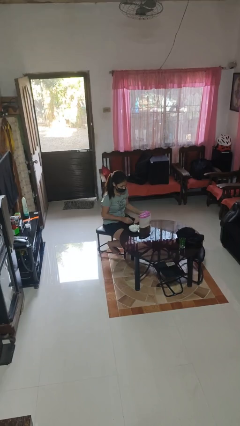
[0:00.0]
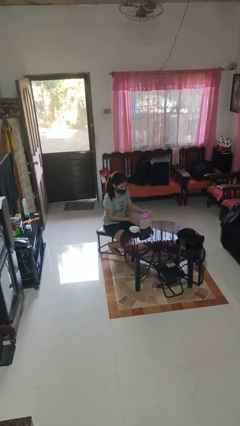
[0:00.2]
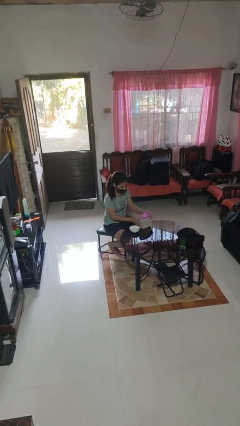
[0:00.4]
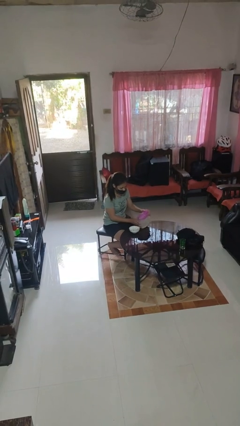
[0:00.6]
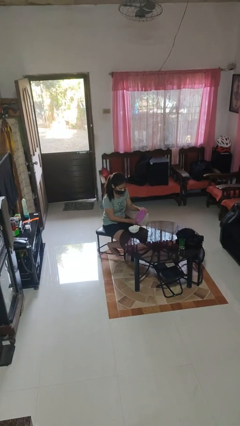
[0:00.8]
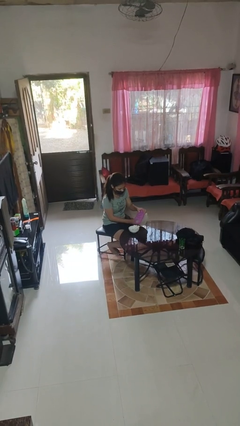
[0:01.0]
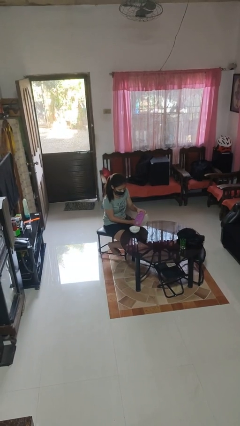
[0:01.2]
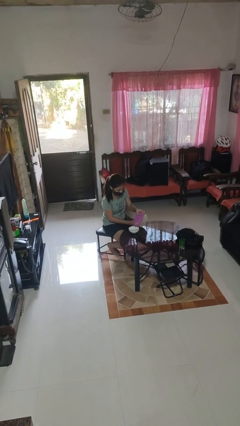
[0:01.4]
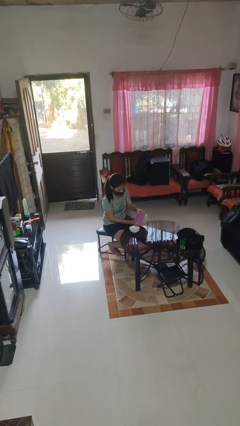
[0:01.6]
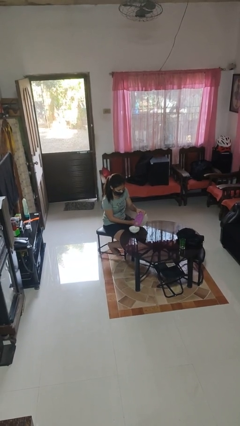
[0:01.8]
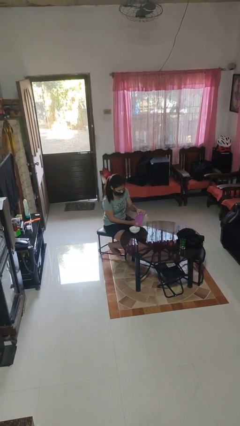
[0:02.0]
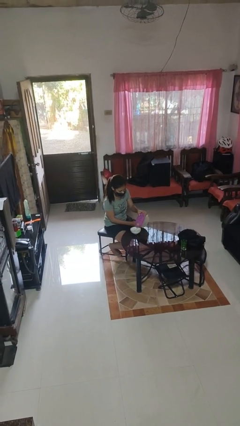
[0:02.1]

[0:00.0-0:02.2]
person pours into bowl

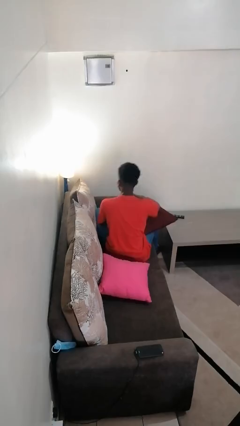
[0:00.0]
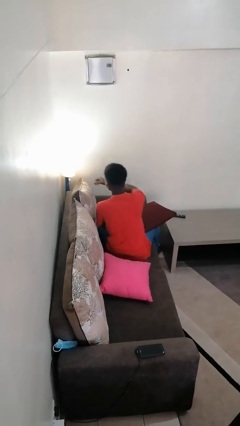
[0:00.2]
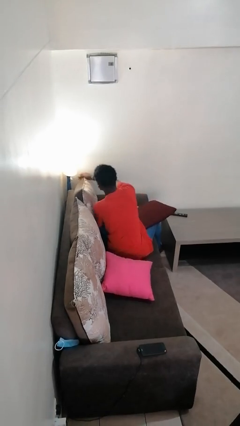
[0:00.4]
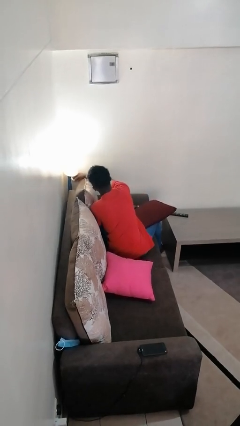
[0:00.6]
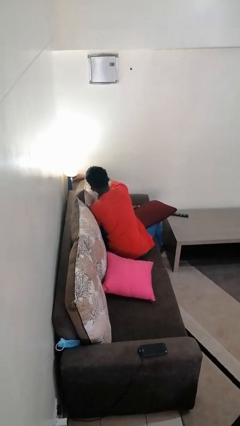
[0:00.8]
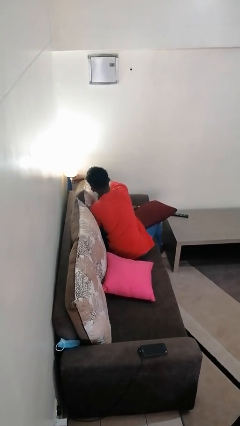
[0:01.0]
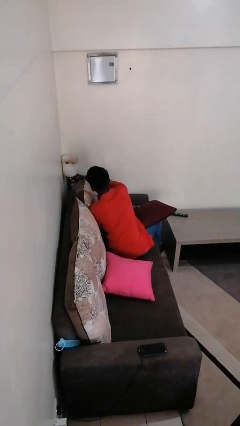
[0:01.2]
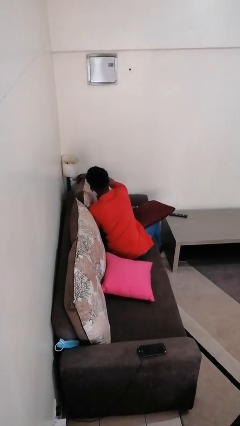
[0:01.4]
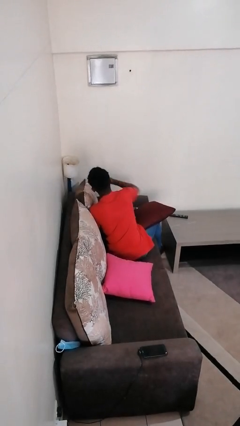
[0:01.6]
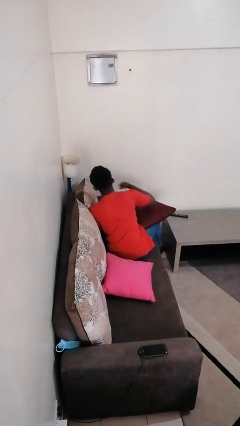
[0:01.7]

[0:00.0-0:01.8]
person turns off lamp

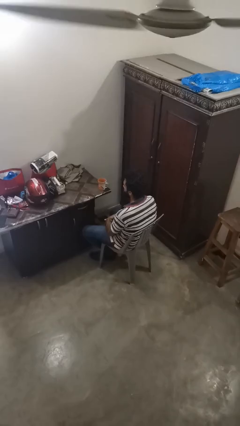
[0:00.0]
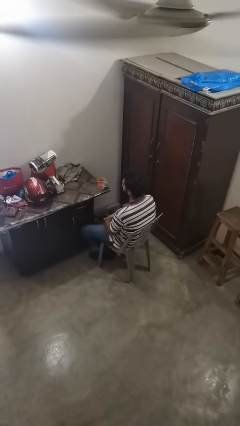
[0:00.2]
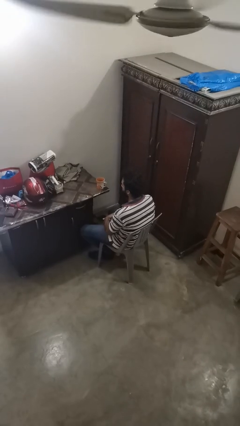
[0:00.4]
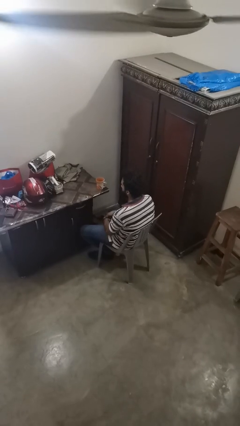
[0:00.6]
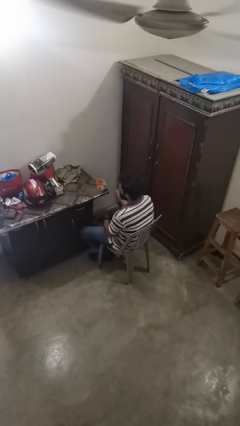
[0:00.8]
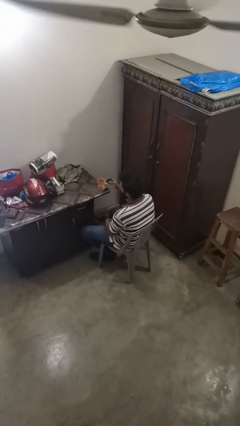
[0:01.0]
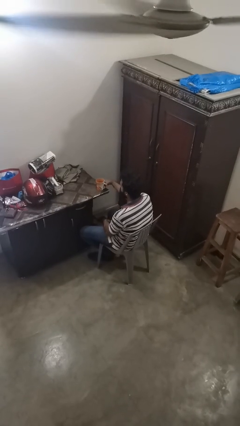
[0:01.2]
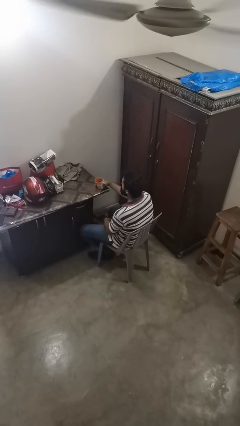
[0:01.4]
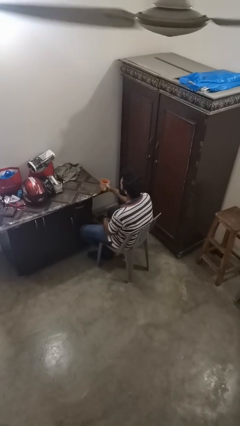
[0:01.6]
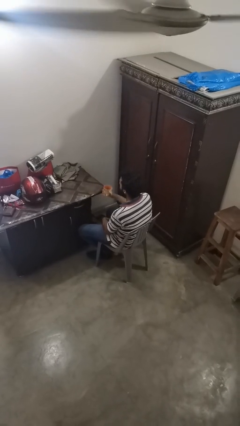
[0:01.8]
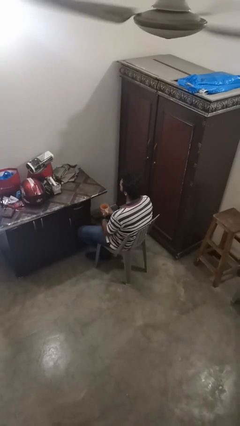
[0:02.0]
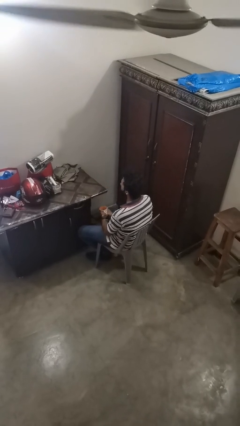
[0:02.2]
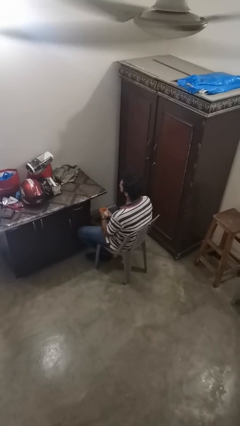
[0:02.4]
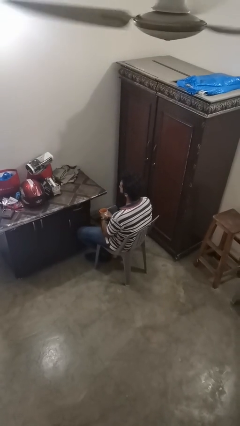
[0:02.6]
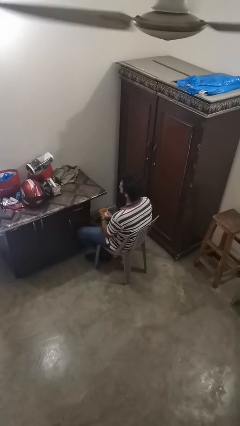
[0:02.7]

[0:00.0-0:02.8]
person picks up object from table

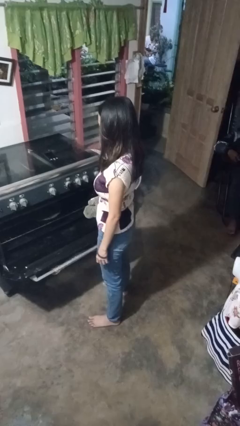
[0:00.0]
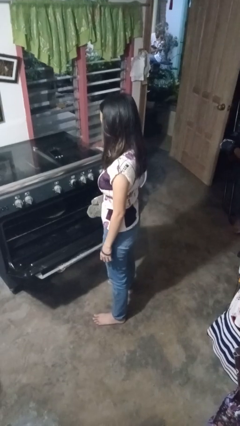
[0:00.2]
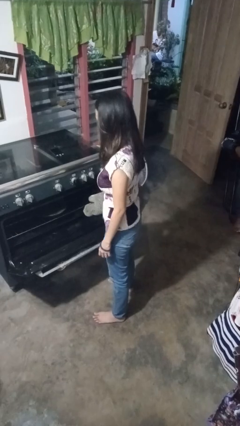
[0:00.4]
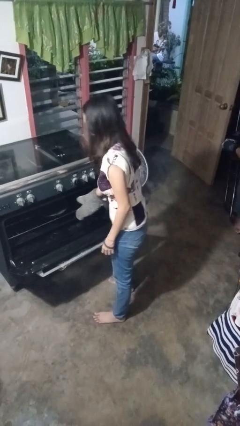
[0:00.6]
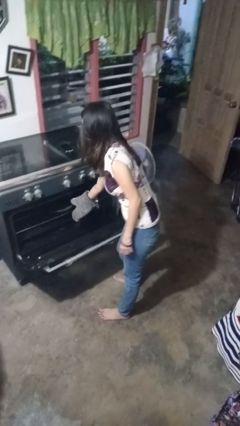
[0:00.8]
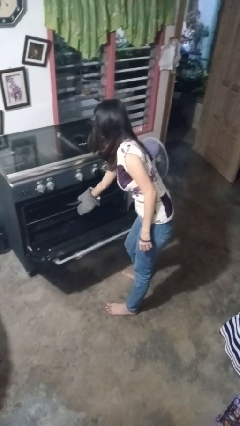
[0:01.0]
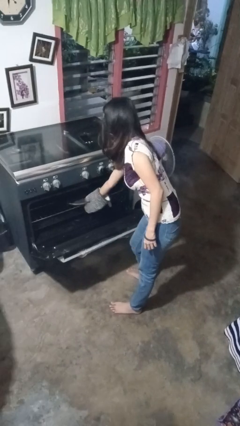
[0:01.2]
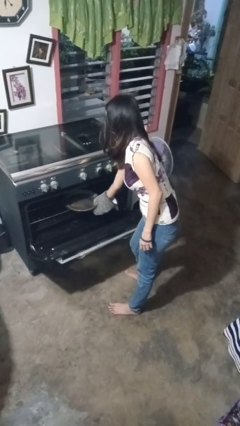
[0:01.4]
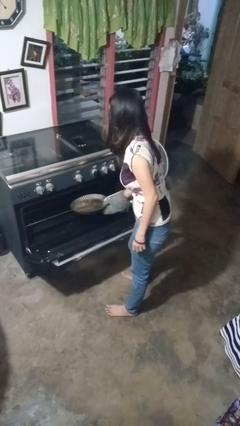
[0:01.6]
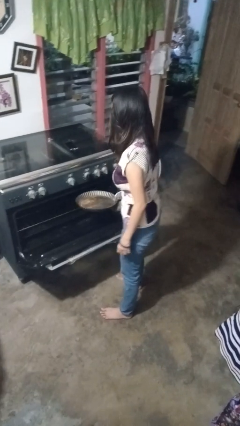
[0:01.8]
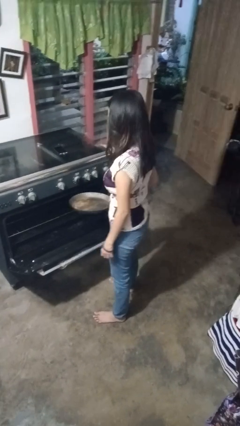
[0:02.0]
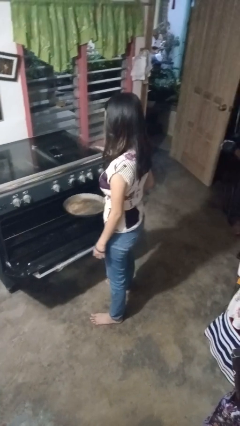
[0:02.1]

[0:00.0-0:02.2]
person takes object from oven

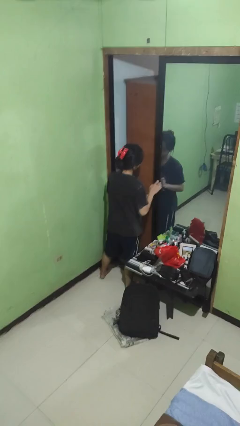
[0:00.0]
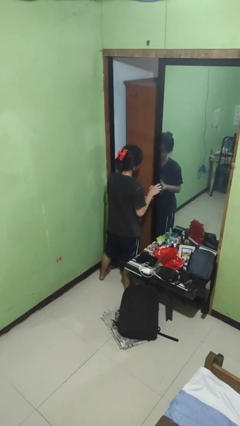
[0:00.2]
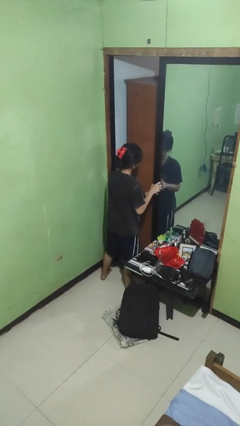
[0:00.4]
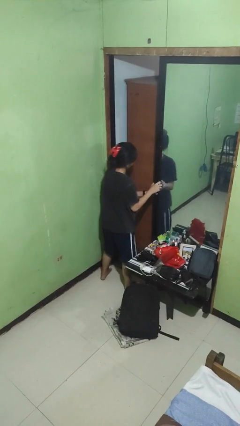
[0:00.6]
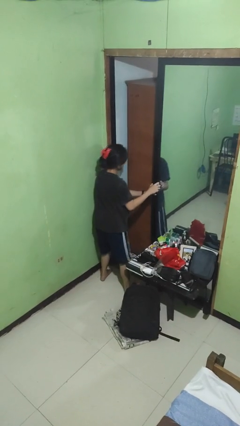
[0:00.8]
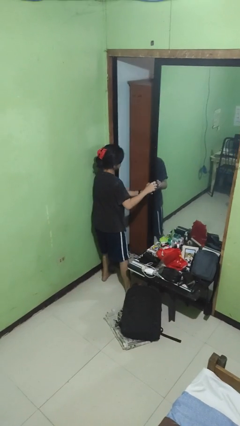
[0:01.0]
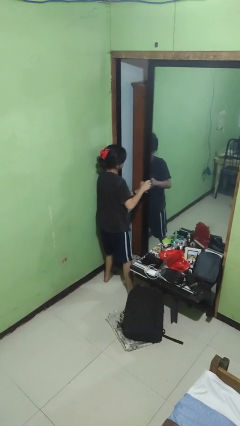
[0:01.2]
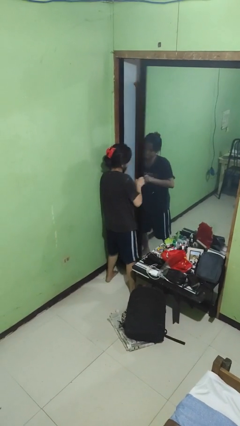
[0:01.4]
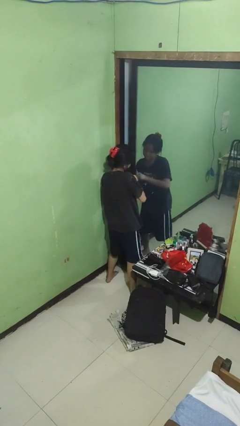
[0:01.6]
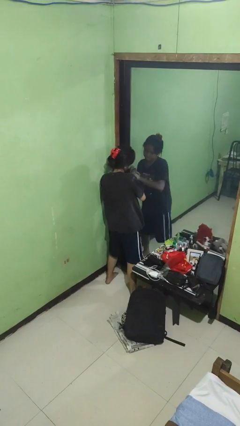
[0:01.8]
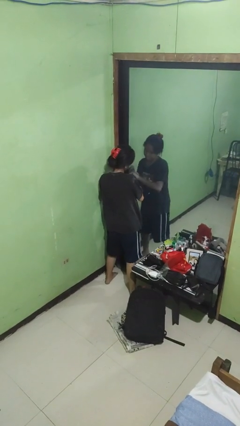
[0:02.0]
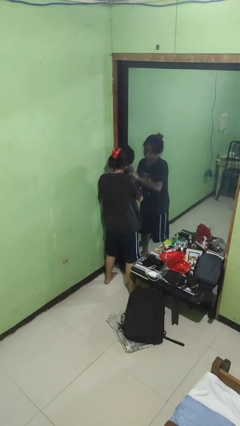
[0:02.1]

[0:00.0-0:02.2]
person closes sliding door

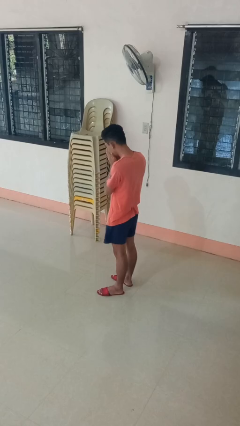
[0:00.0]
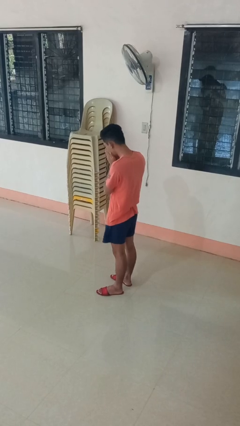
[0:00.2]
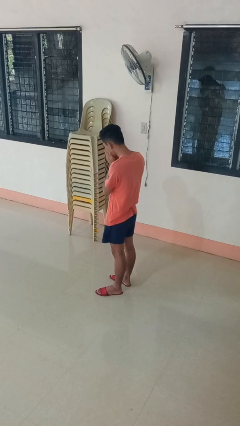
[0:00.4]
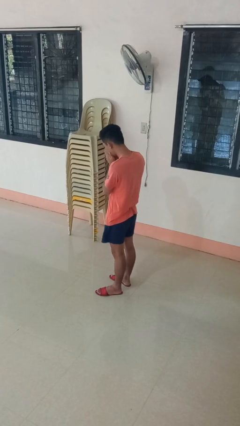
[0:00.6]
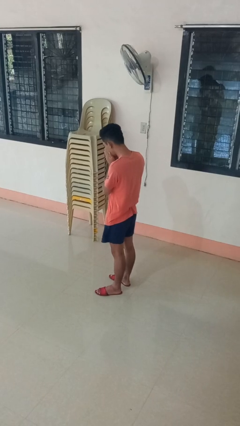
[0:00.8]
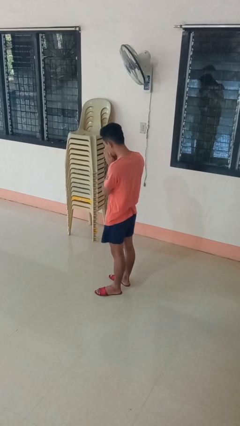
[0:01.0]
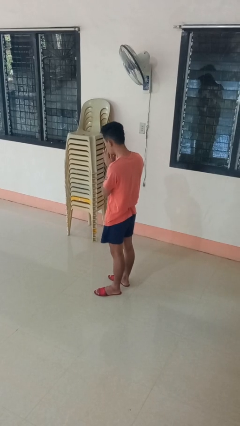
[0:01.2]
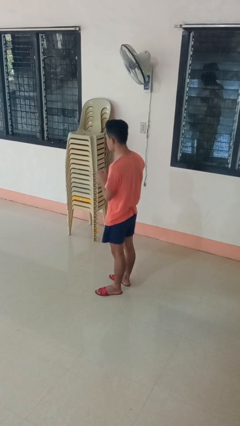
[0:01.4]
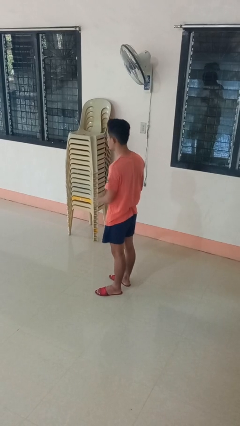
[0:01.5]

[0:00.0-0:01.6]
person sneezes into hand

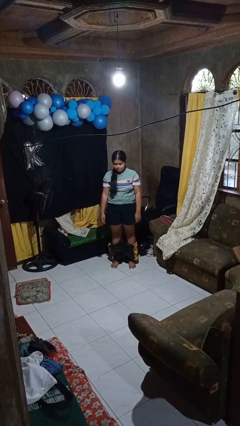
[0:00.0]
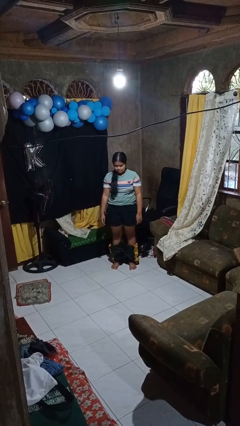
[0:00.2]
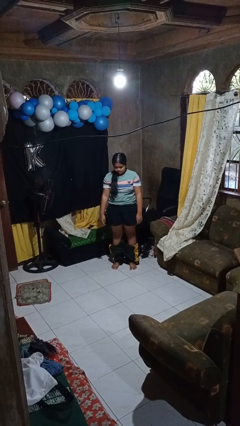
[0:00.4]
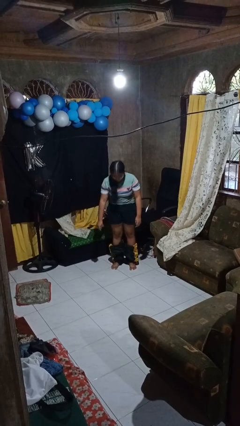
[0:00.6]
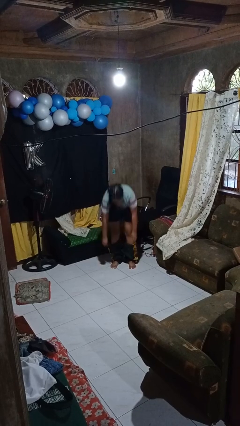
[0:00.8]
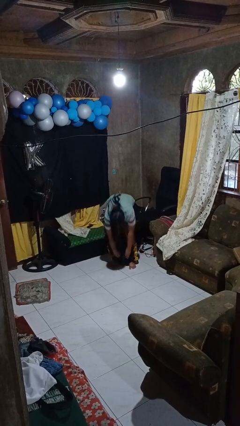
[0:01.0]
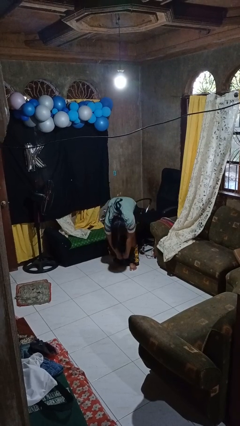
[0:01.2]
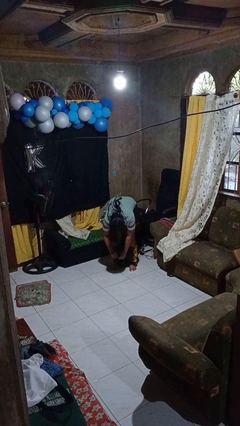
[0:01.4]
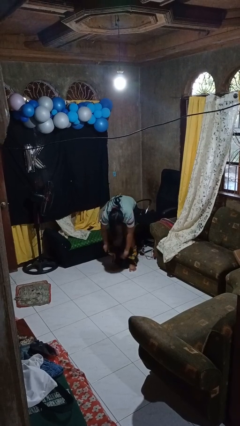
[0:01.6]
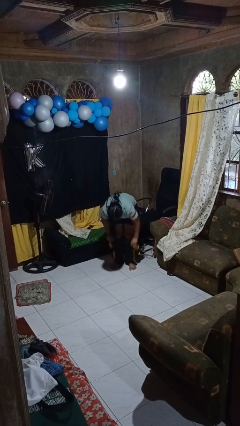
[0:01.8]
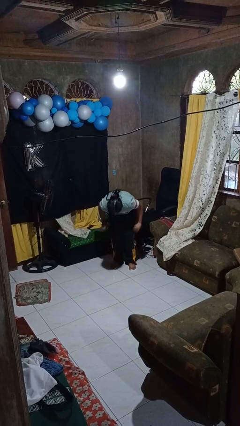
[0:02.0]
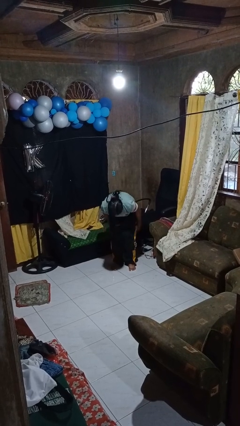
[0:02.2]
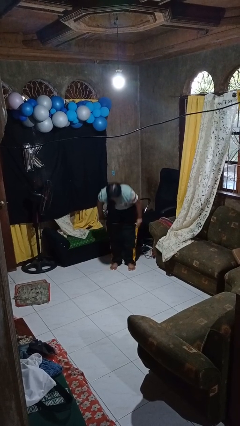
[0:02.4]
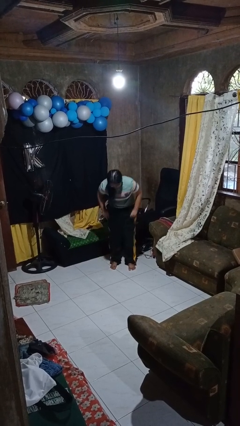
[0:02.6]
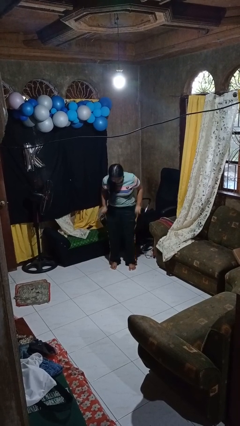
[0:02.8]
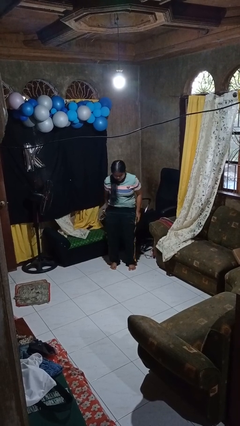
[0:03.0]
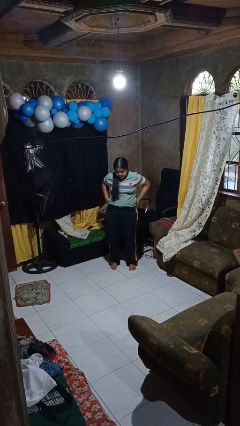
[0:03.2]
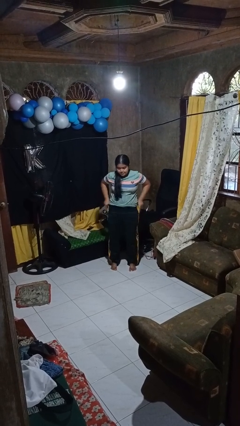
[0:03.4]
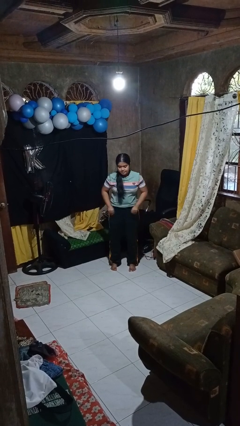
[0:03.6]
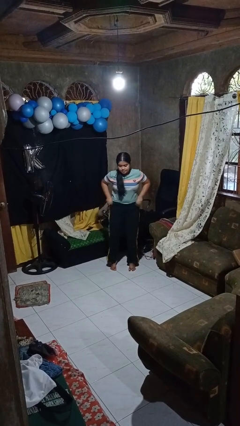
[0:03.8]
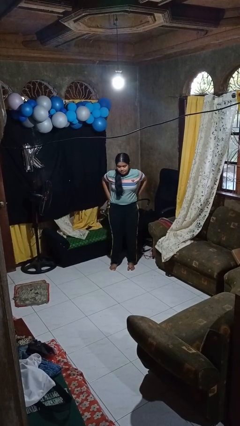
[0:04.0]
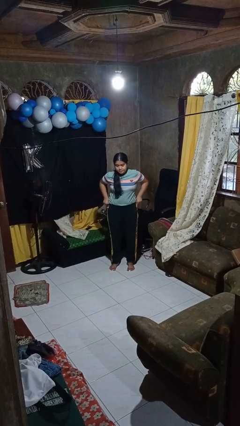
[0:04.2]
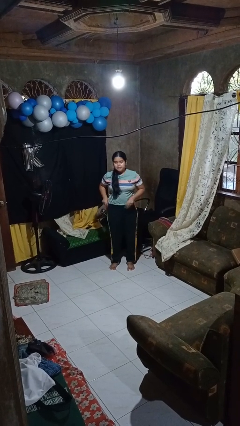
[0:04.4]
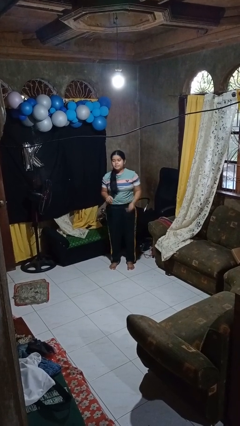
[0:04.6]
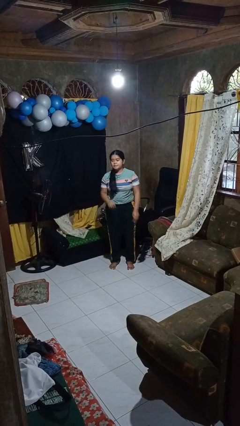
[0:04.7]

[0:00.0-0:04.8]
person puts on pants
